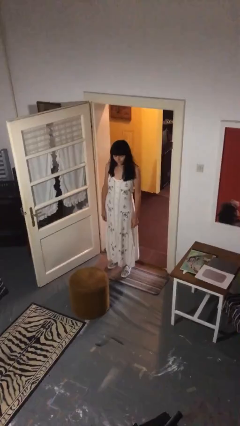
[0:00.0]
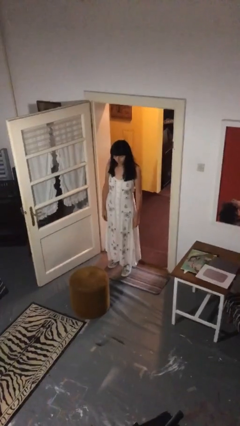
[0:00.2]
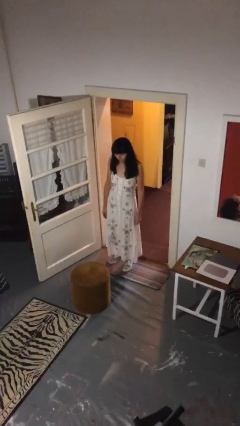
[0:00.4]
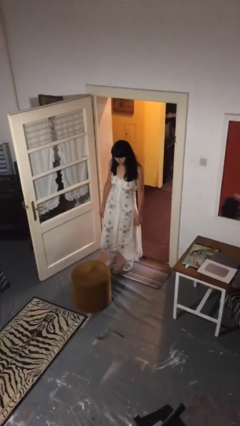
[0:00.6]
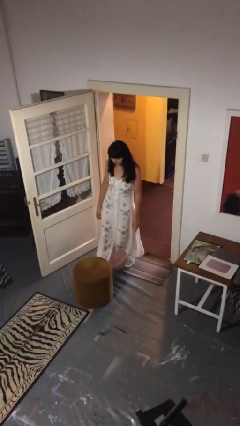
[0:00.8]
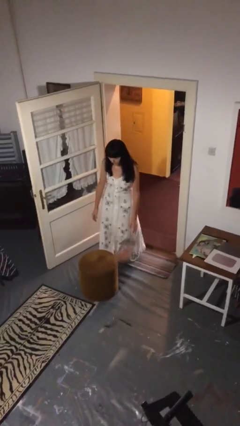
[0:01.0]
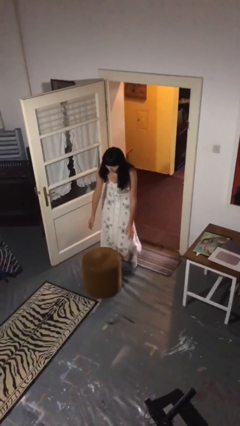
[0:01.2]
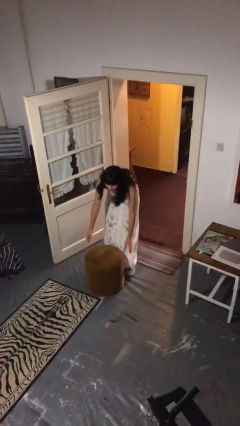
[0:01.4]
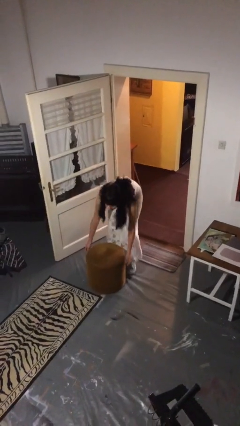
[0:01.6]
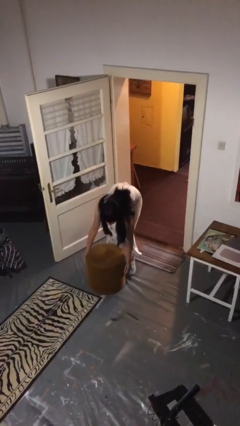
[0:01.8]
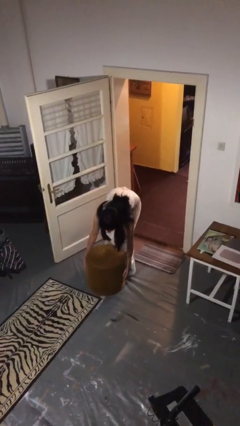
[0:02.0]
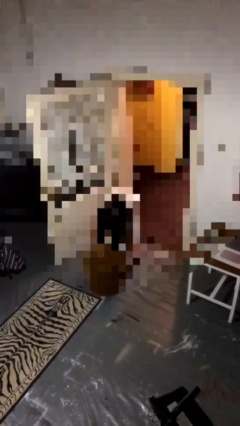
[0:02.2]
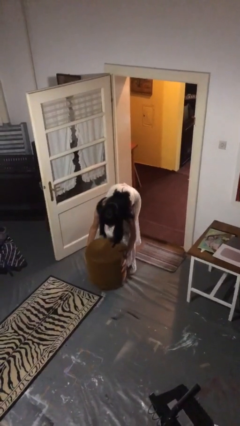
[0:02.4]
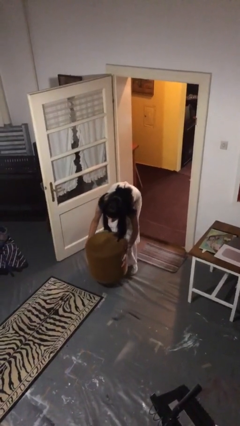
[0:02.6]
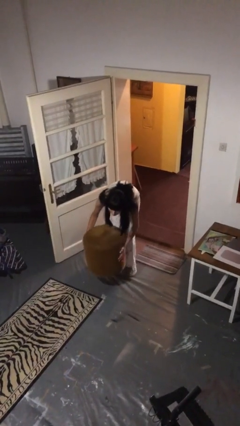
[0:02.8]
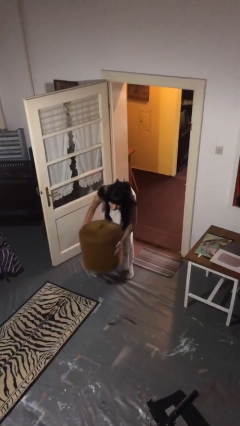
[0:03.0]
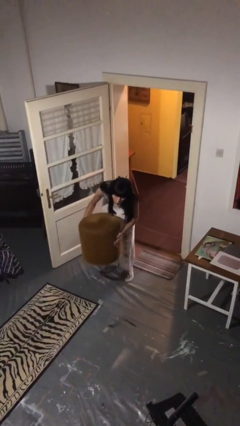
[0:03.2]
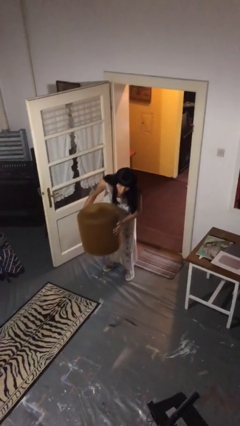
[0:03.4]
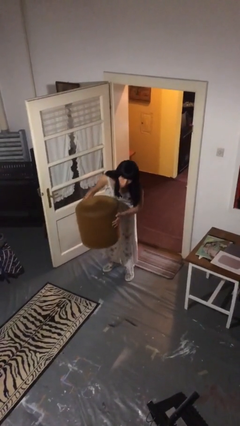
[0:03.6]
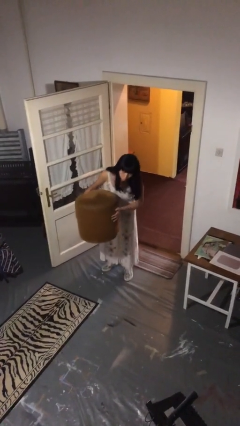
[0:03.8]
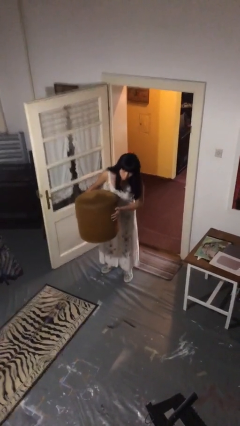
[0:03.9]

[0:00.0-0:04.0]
person picks up object from floor

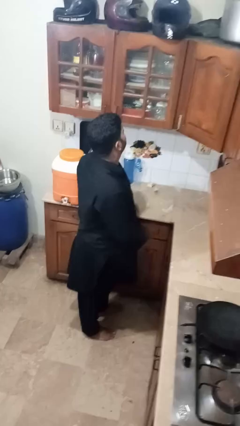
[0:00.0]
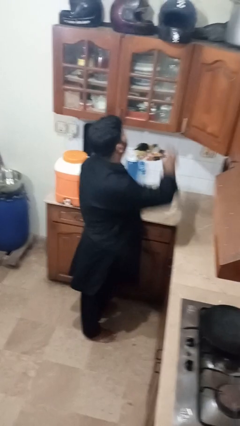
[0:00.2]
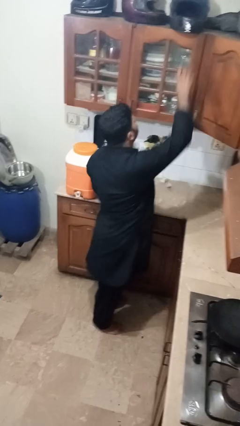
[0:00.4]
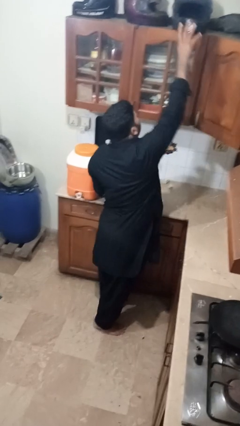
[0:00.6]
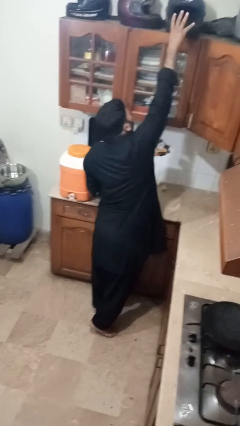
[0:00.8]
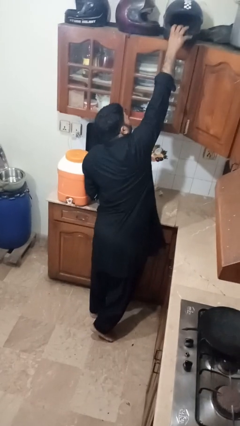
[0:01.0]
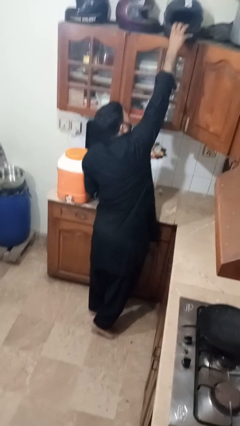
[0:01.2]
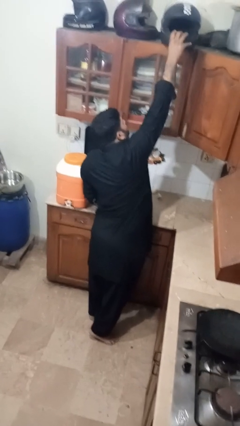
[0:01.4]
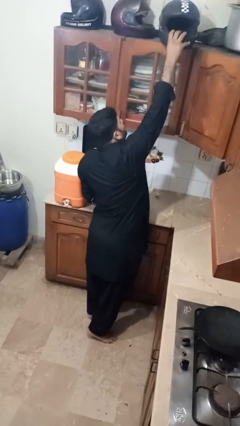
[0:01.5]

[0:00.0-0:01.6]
person picks up object from shelf

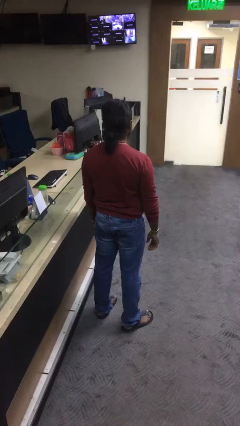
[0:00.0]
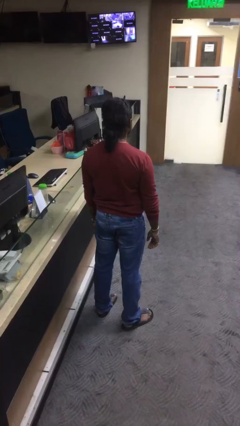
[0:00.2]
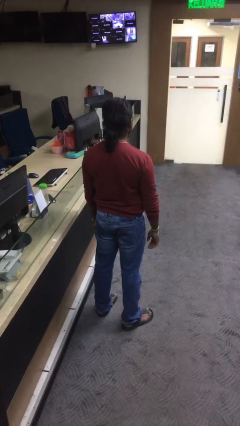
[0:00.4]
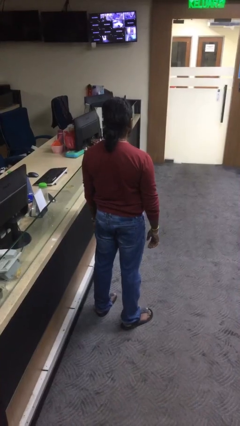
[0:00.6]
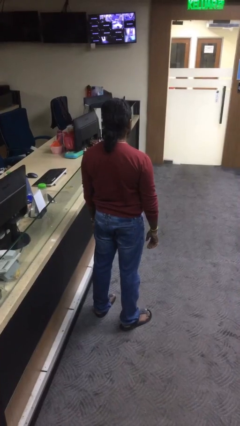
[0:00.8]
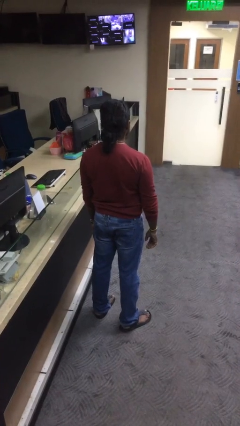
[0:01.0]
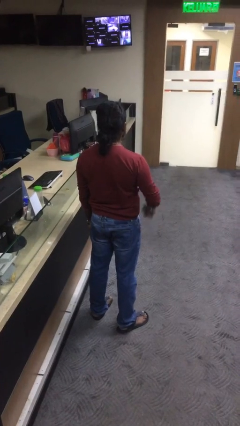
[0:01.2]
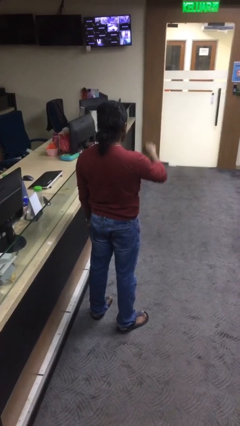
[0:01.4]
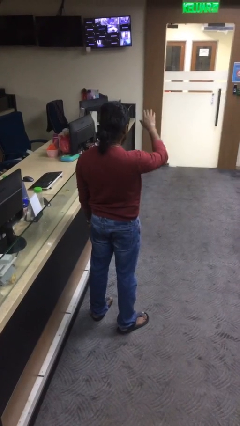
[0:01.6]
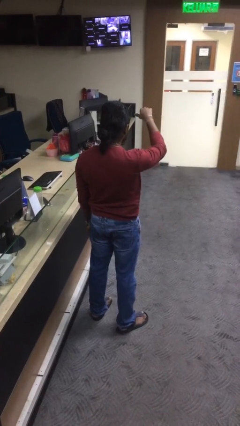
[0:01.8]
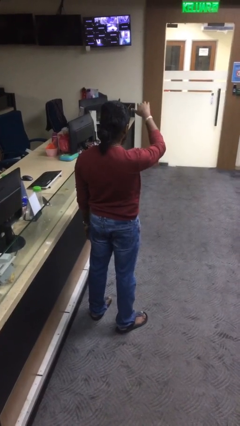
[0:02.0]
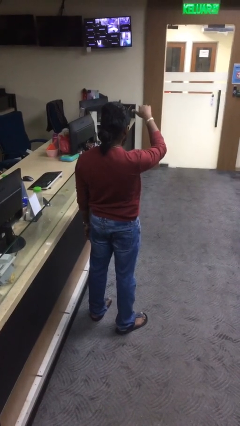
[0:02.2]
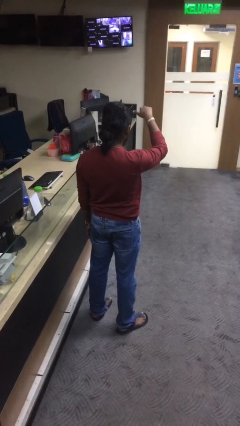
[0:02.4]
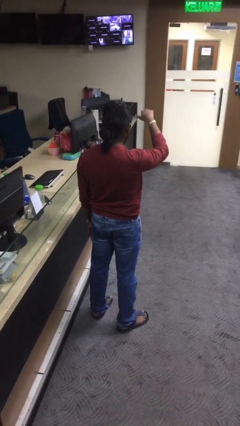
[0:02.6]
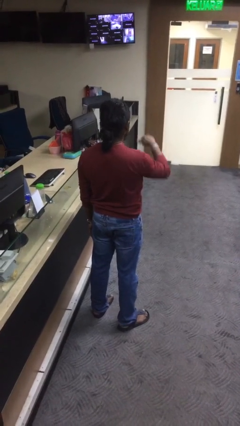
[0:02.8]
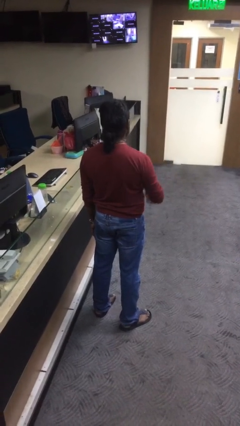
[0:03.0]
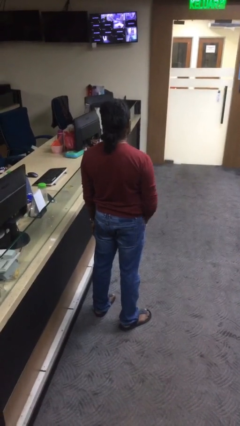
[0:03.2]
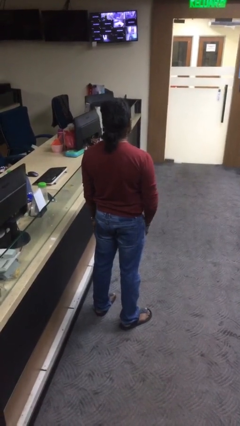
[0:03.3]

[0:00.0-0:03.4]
person gestures come here

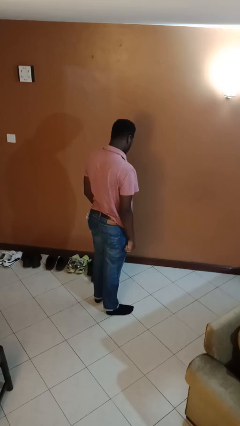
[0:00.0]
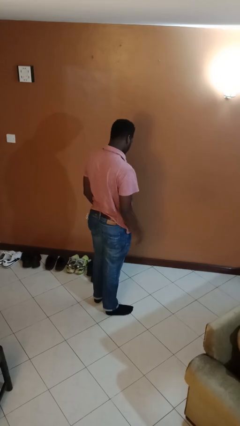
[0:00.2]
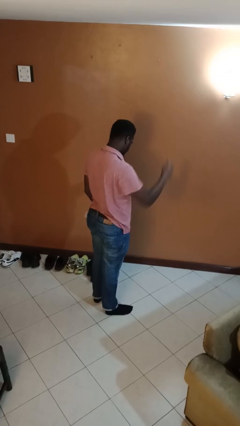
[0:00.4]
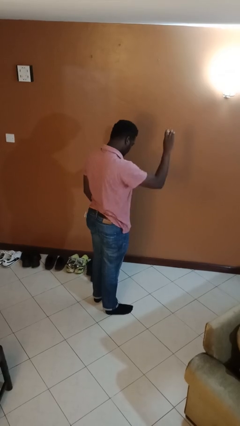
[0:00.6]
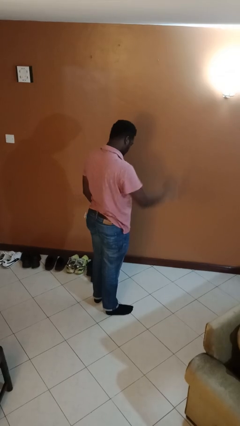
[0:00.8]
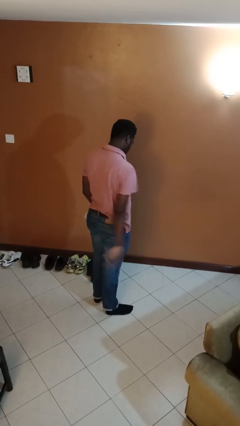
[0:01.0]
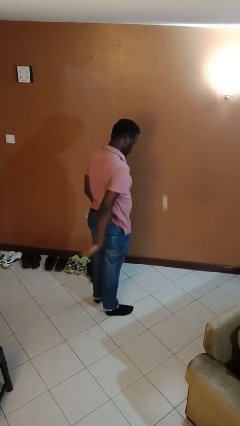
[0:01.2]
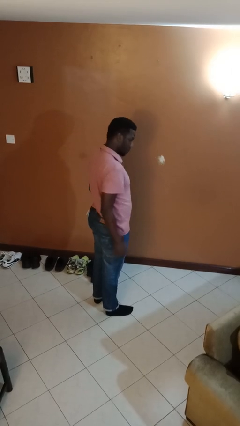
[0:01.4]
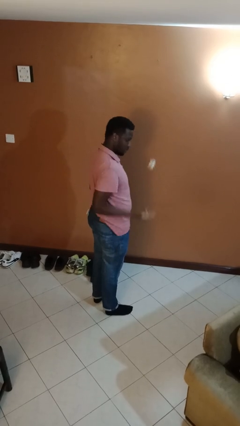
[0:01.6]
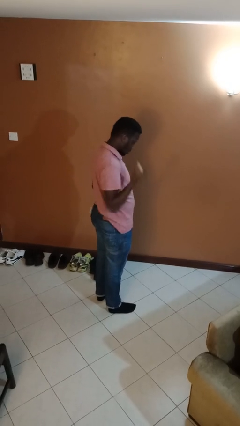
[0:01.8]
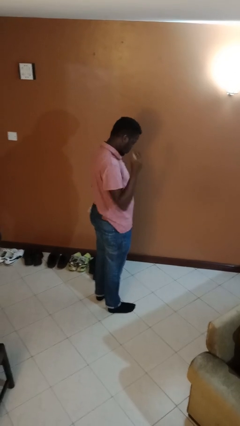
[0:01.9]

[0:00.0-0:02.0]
person bounces ball on floor

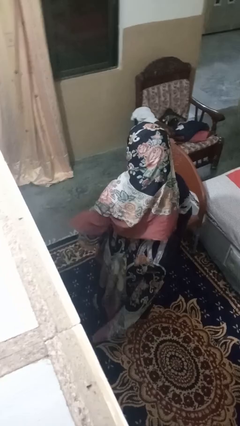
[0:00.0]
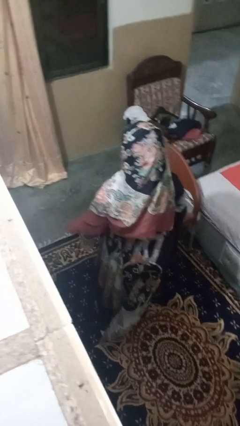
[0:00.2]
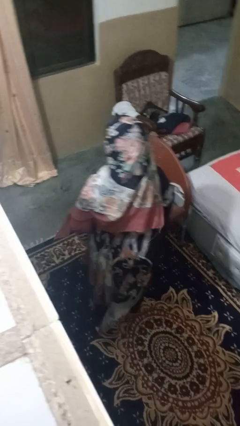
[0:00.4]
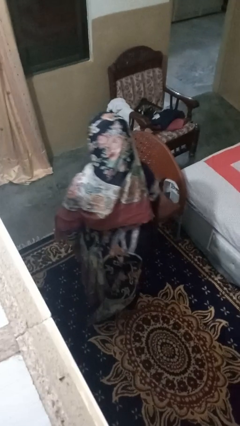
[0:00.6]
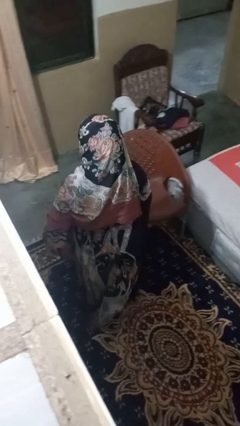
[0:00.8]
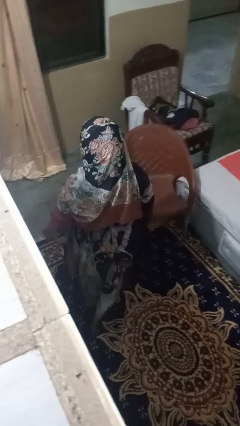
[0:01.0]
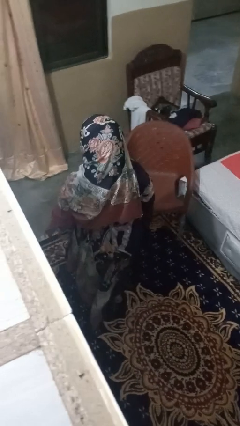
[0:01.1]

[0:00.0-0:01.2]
person trips on object on floor

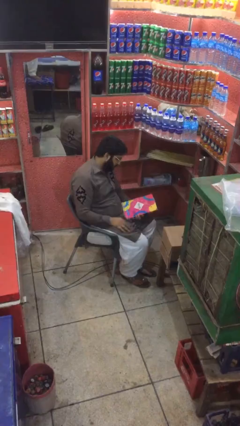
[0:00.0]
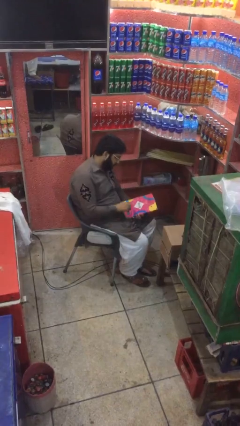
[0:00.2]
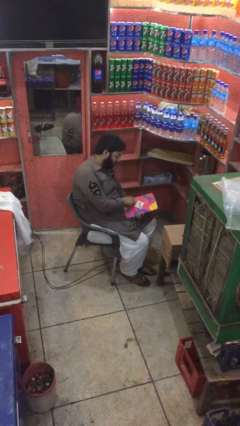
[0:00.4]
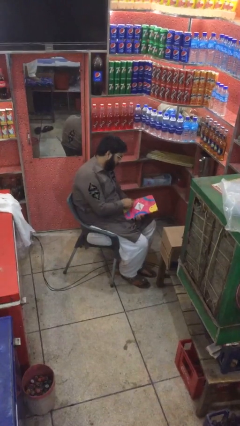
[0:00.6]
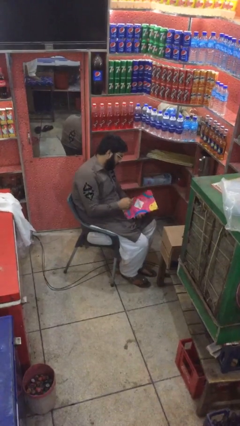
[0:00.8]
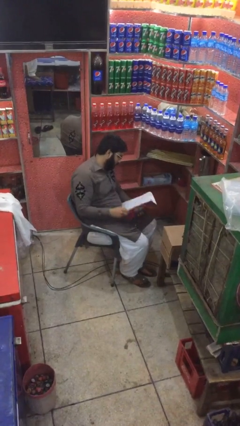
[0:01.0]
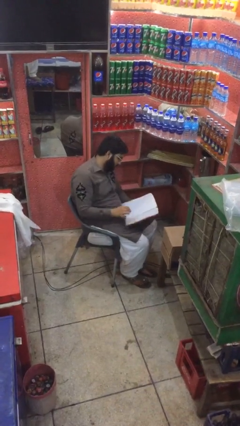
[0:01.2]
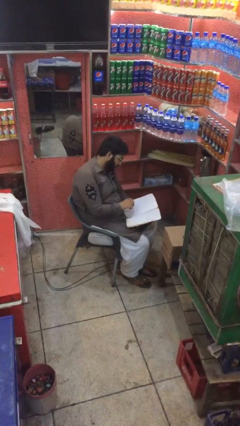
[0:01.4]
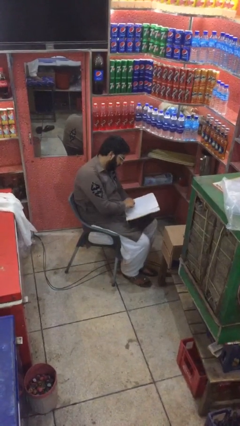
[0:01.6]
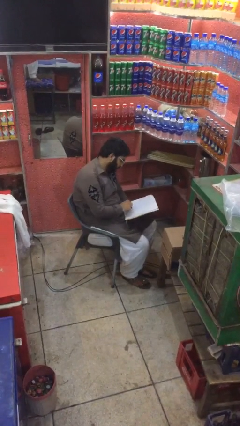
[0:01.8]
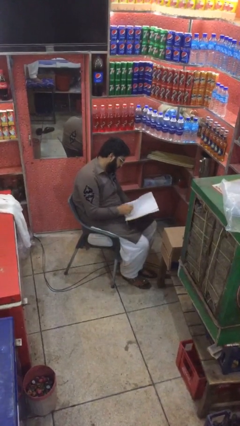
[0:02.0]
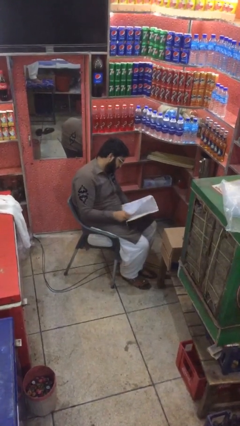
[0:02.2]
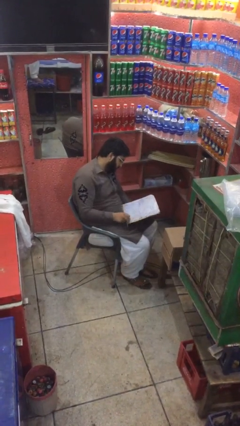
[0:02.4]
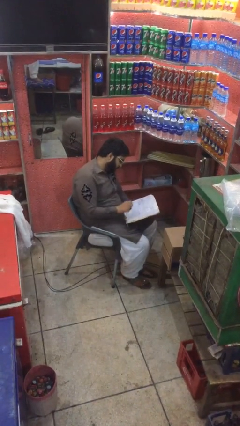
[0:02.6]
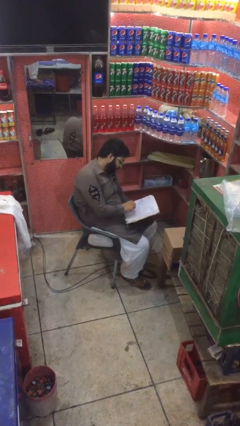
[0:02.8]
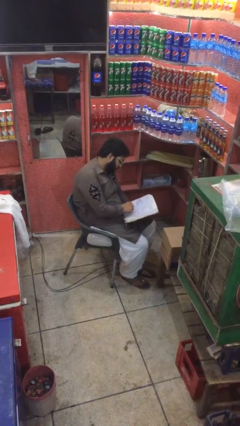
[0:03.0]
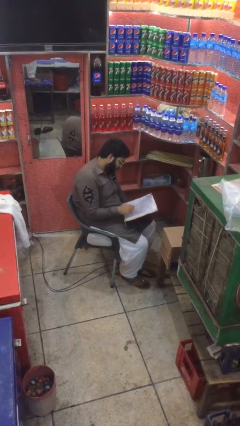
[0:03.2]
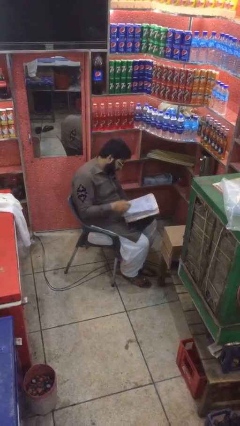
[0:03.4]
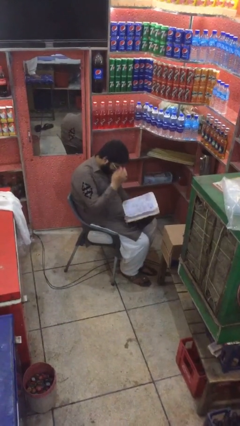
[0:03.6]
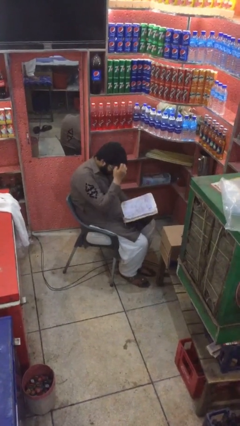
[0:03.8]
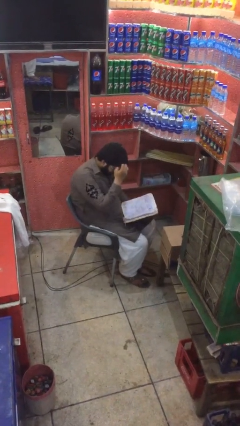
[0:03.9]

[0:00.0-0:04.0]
person reads document

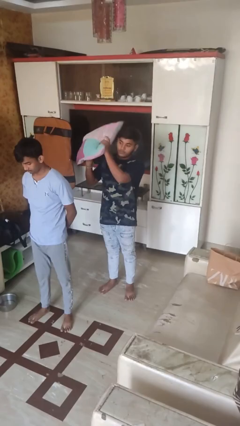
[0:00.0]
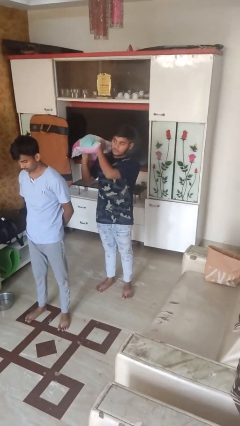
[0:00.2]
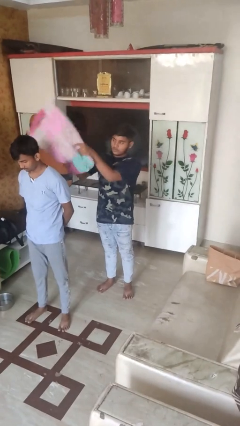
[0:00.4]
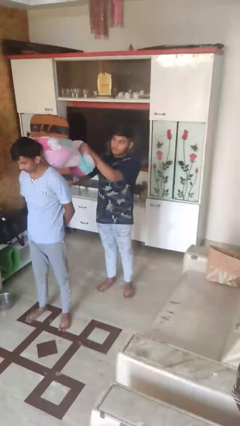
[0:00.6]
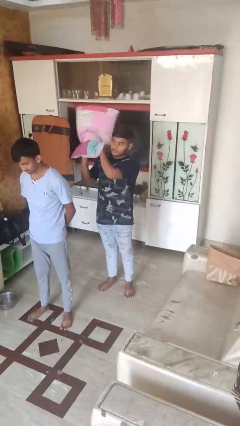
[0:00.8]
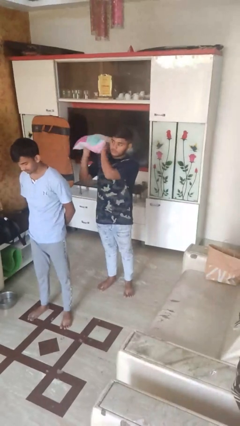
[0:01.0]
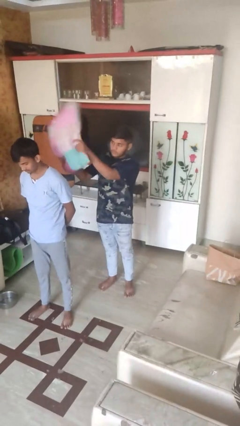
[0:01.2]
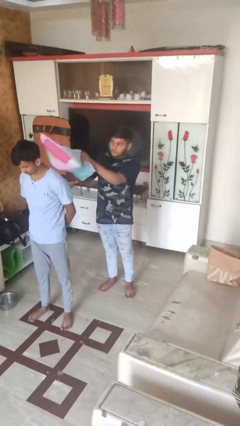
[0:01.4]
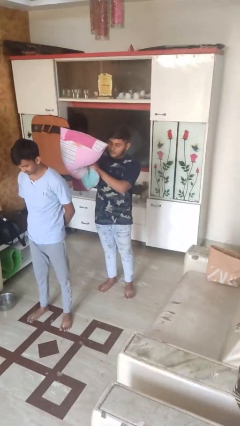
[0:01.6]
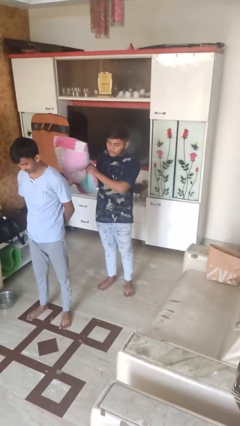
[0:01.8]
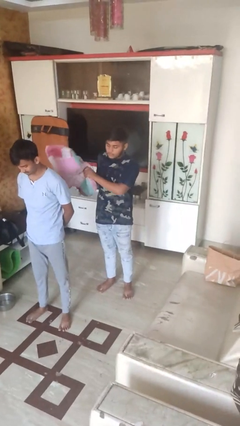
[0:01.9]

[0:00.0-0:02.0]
person hits person with pillow
